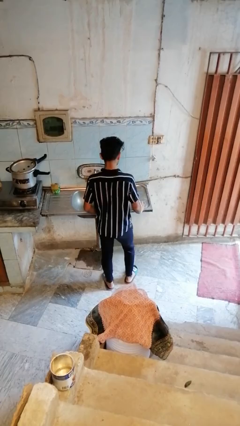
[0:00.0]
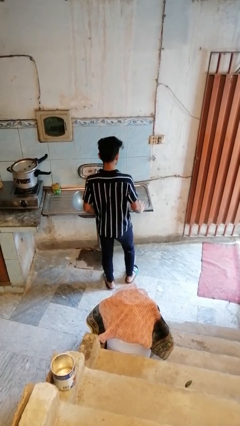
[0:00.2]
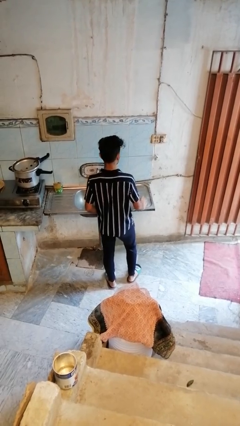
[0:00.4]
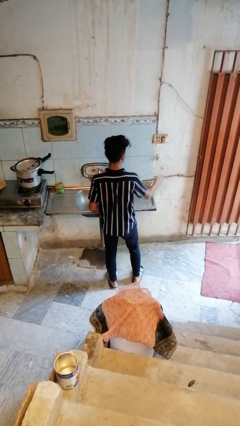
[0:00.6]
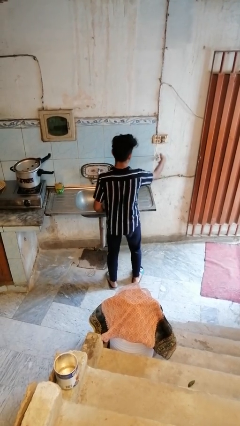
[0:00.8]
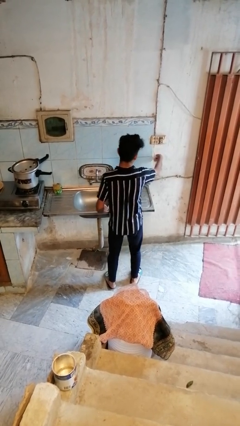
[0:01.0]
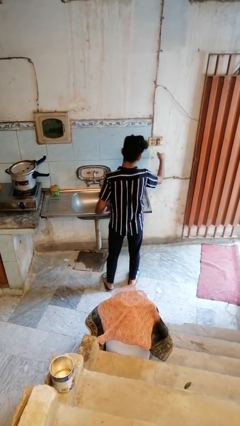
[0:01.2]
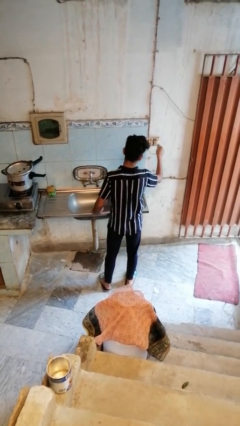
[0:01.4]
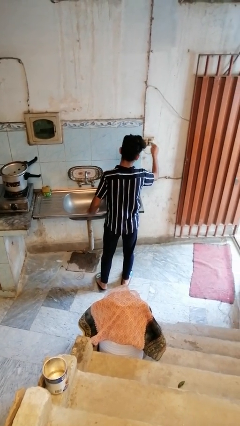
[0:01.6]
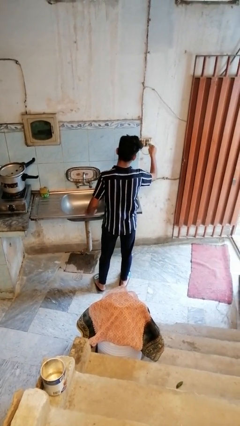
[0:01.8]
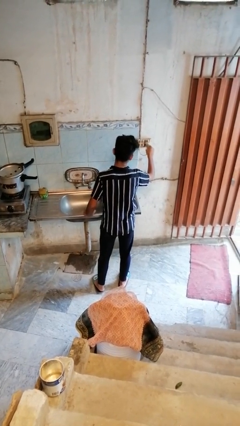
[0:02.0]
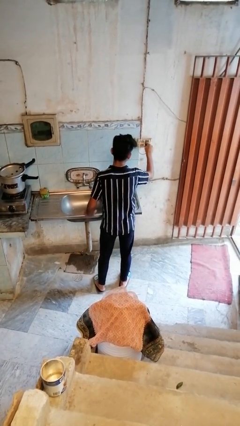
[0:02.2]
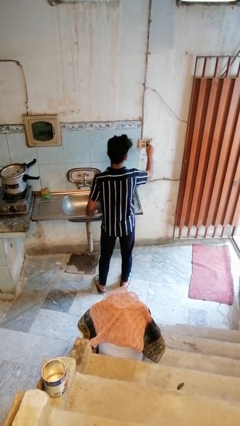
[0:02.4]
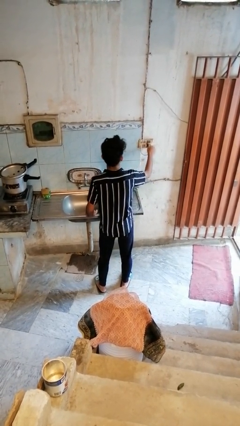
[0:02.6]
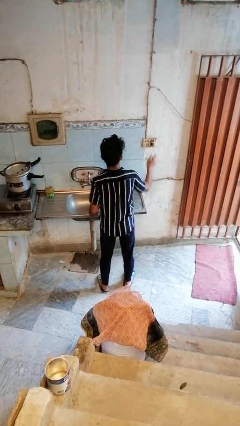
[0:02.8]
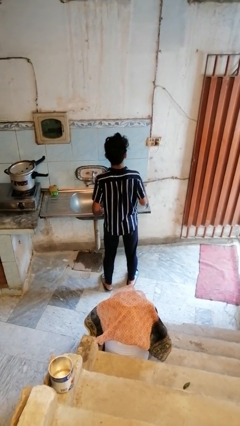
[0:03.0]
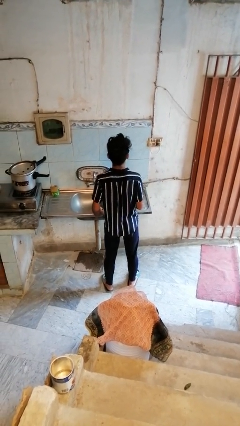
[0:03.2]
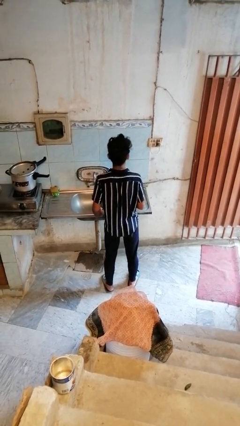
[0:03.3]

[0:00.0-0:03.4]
person plugs into electrical socket

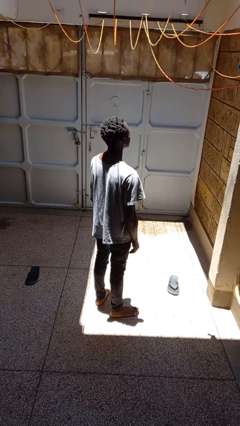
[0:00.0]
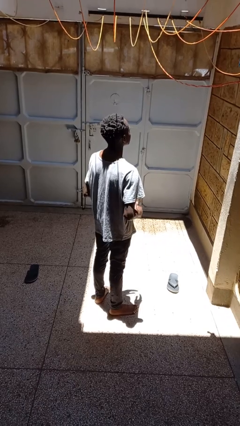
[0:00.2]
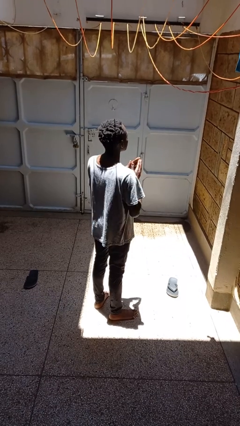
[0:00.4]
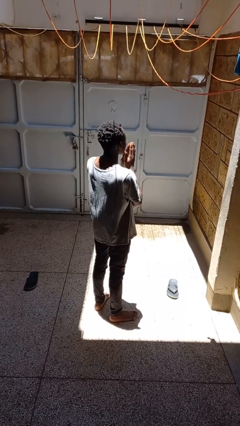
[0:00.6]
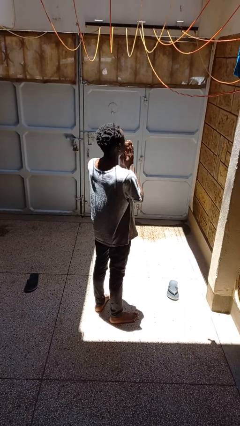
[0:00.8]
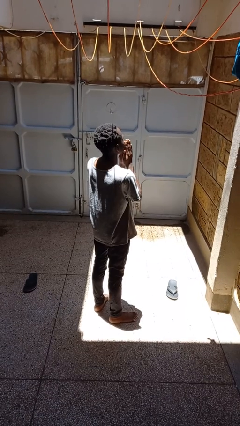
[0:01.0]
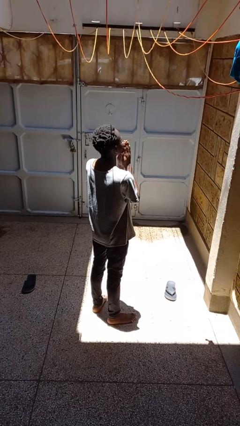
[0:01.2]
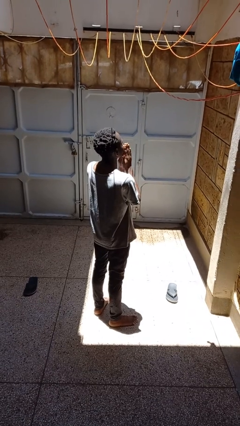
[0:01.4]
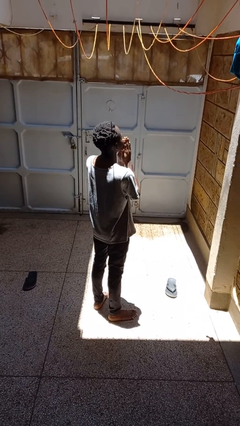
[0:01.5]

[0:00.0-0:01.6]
person prays

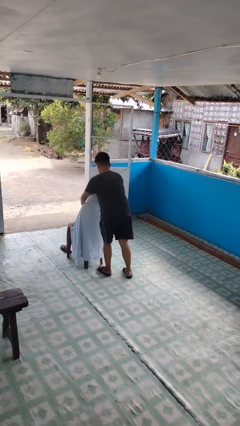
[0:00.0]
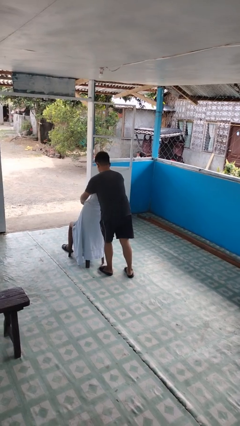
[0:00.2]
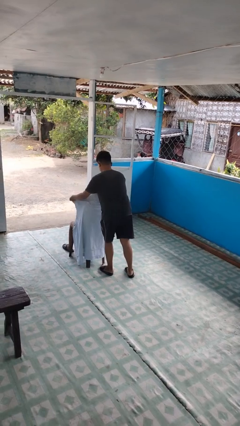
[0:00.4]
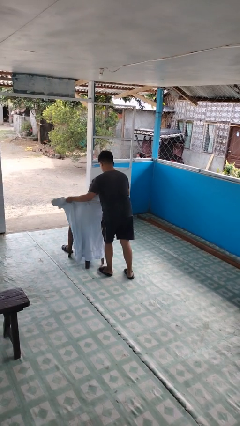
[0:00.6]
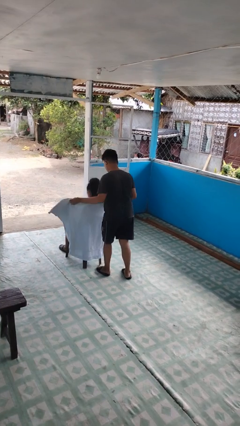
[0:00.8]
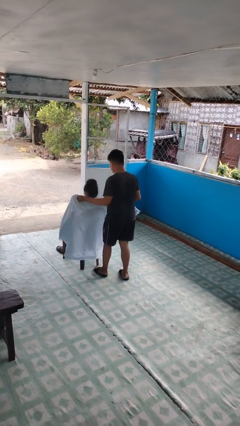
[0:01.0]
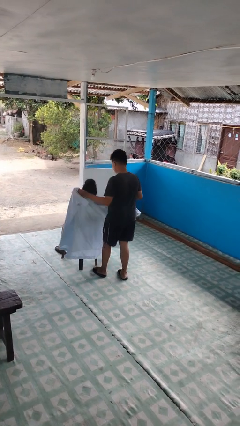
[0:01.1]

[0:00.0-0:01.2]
person uncovers friend with blanket

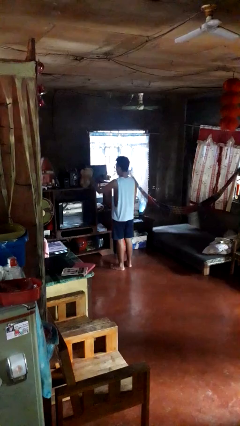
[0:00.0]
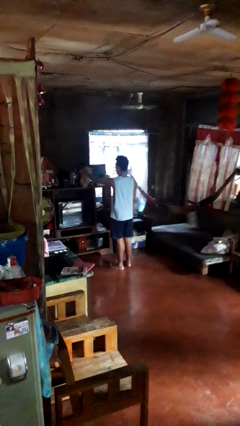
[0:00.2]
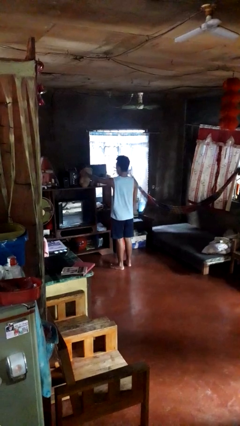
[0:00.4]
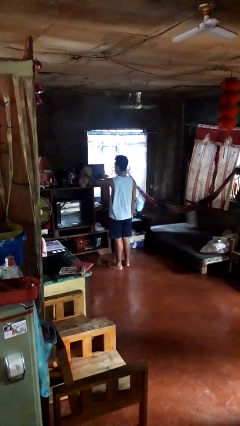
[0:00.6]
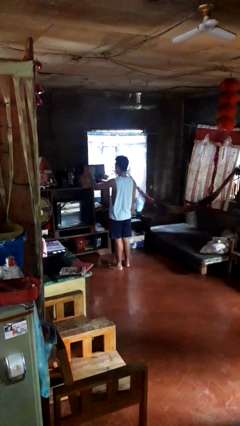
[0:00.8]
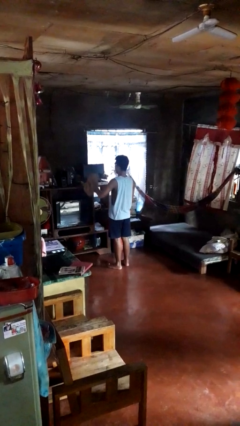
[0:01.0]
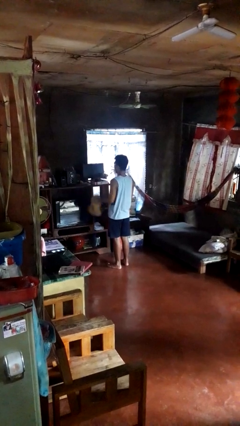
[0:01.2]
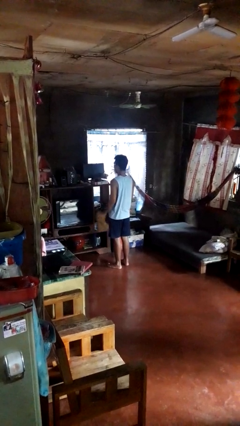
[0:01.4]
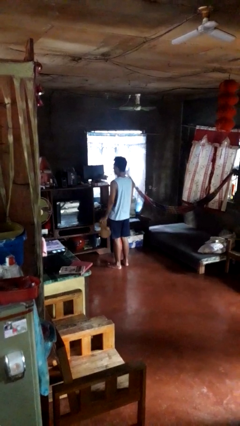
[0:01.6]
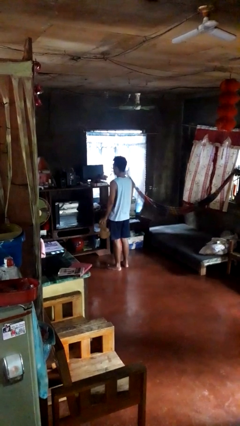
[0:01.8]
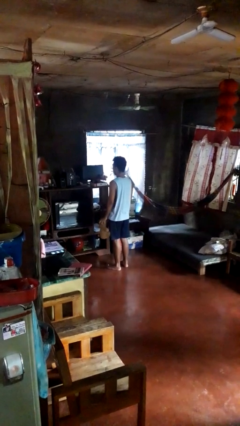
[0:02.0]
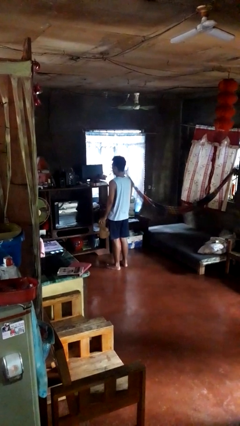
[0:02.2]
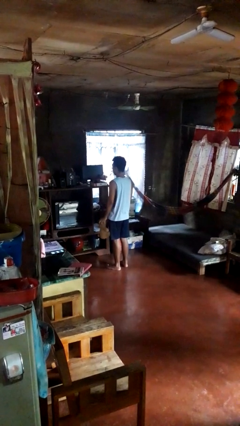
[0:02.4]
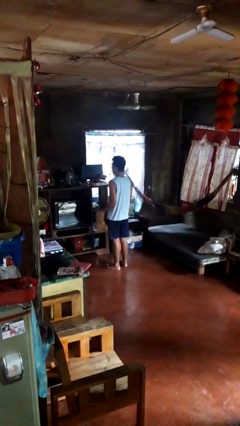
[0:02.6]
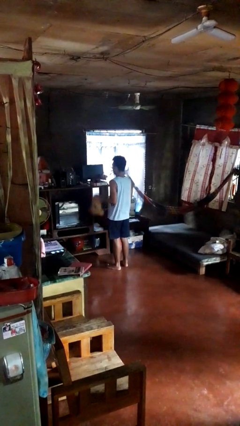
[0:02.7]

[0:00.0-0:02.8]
person picks up object from shelf

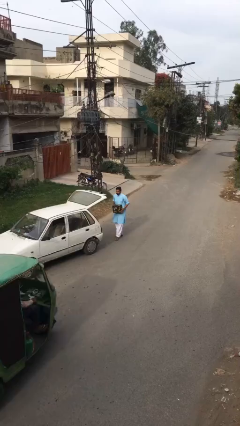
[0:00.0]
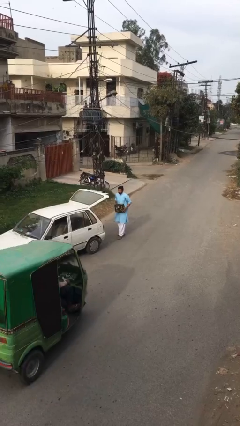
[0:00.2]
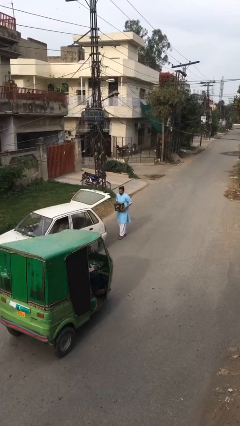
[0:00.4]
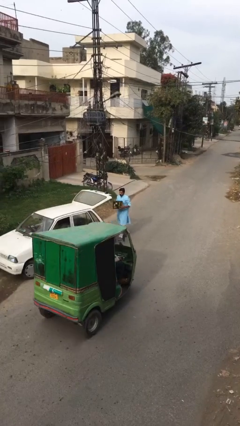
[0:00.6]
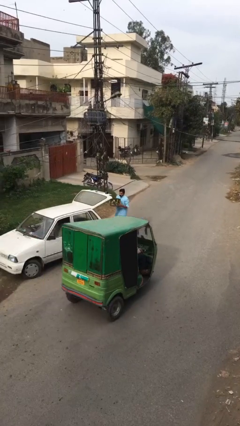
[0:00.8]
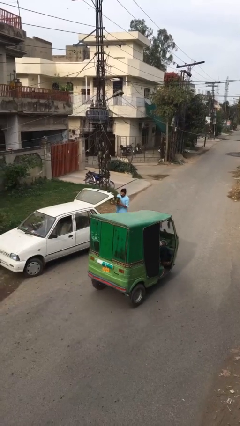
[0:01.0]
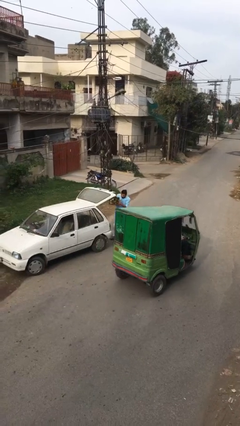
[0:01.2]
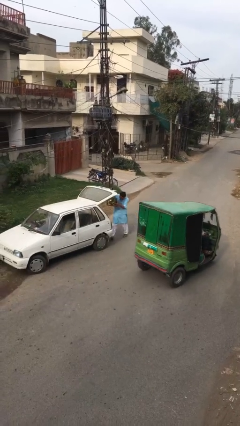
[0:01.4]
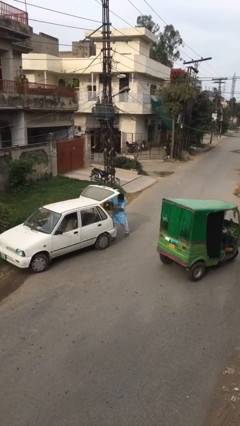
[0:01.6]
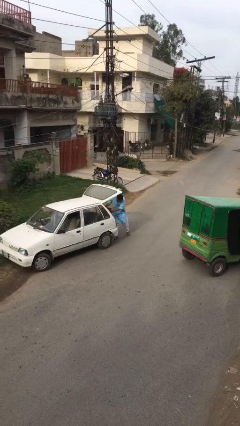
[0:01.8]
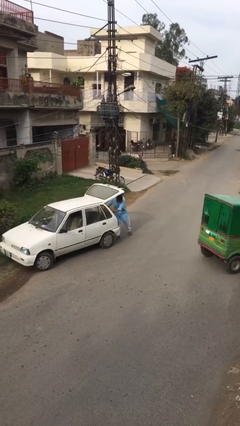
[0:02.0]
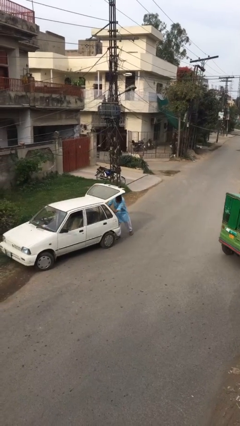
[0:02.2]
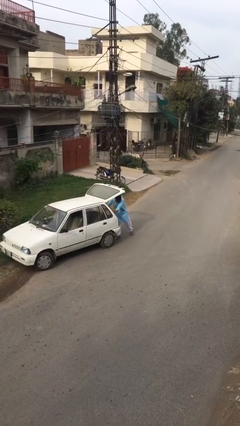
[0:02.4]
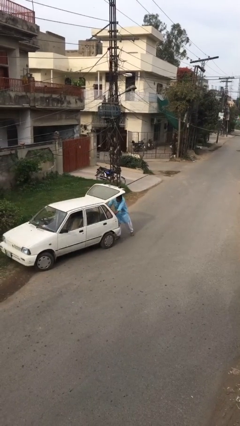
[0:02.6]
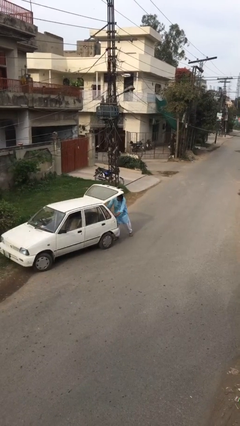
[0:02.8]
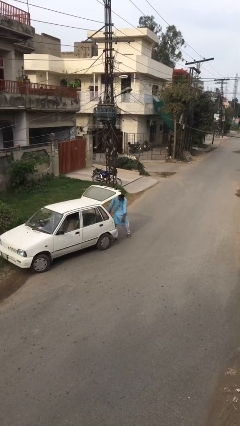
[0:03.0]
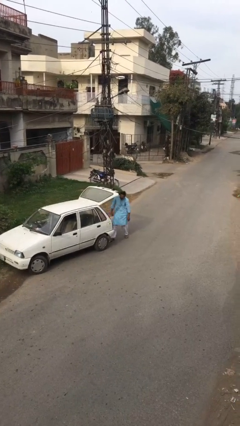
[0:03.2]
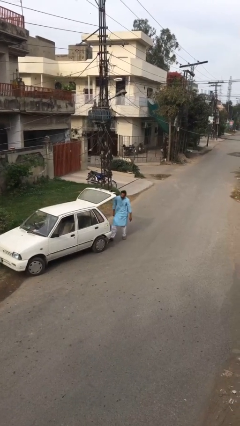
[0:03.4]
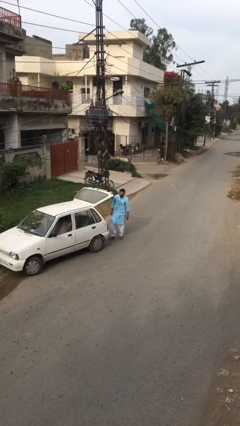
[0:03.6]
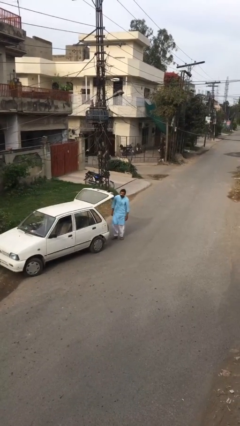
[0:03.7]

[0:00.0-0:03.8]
person loads car

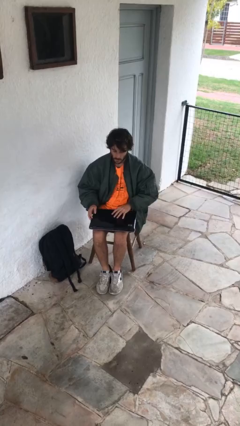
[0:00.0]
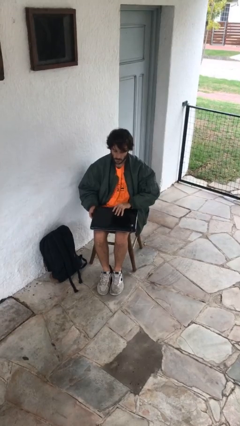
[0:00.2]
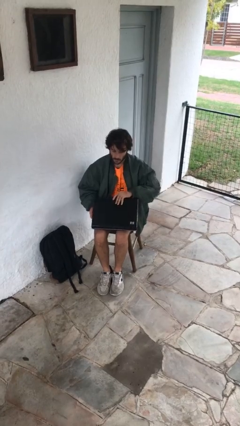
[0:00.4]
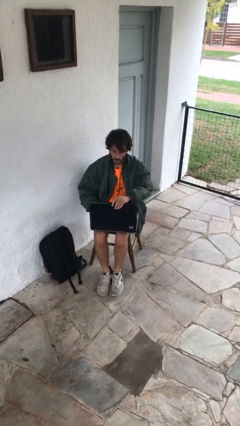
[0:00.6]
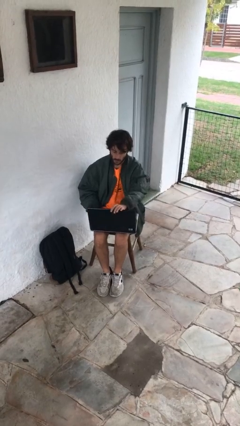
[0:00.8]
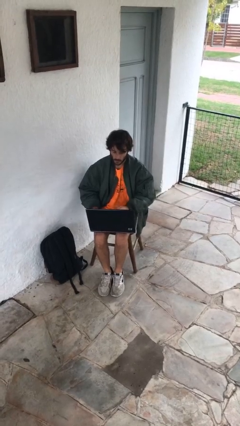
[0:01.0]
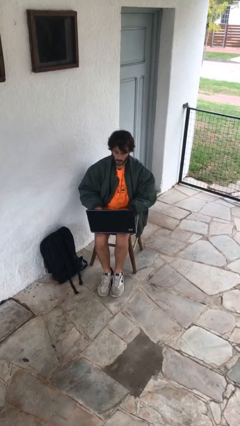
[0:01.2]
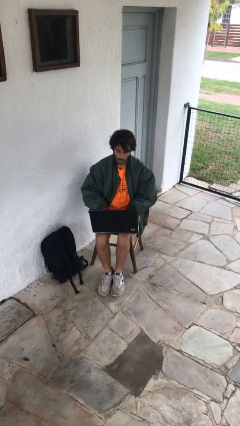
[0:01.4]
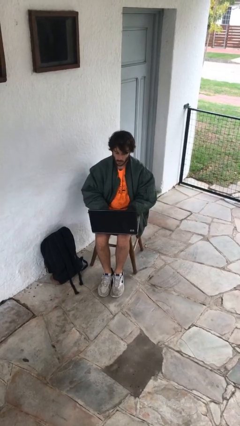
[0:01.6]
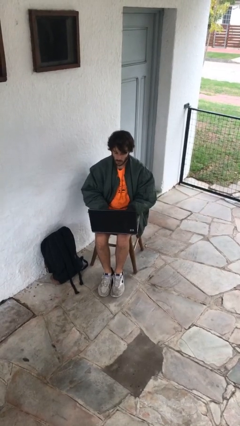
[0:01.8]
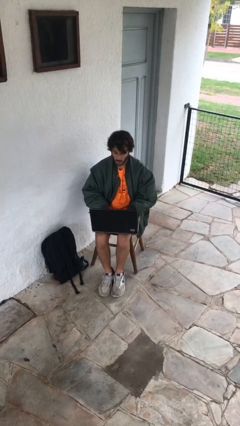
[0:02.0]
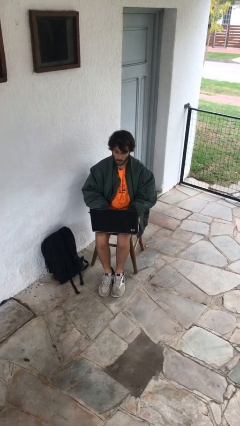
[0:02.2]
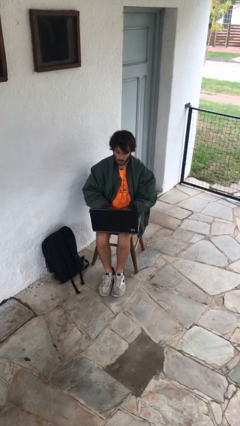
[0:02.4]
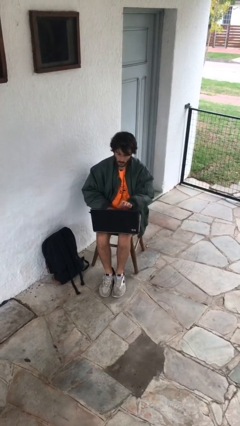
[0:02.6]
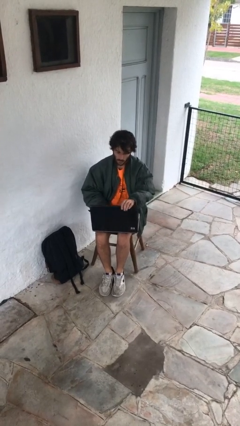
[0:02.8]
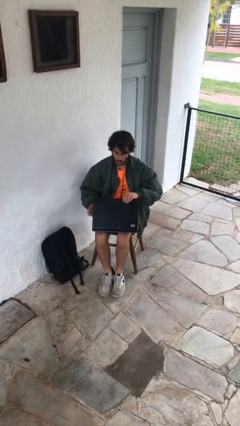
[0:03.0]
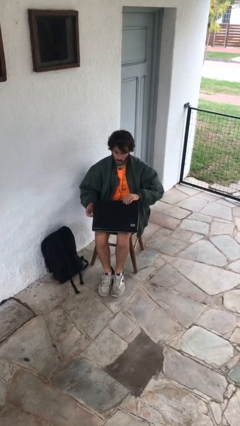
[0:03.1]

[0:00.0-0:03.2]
person interacts with laptop

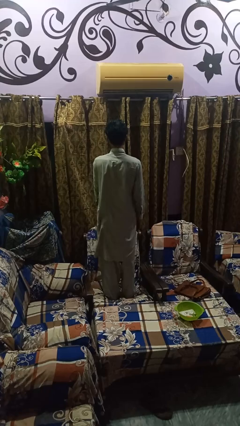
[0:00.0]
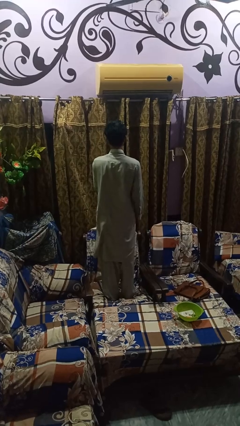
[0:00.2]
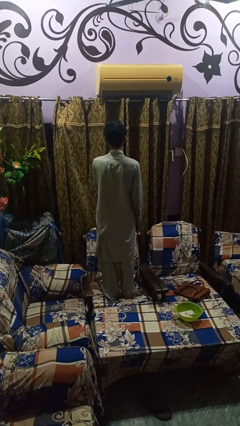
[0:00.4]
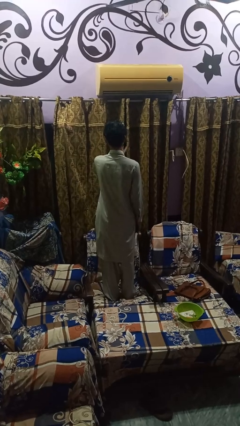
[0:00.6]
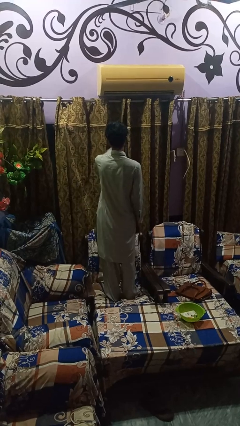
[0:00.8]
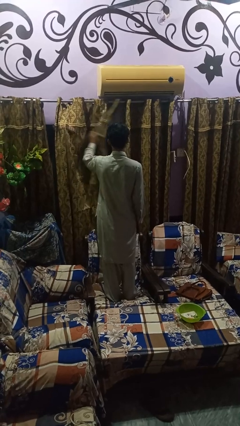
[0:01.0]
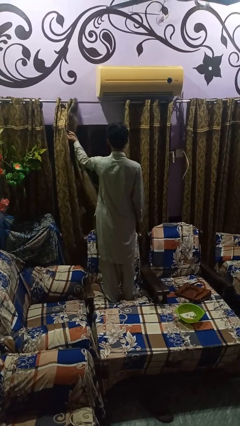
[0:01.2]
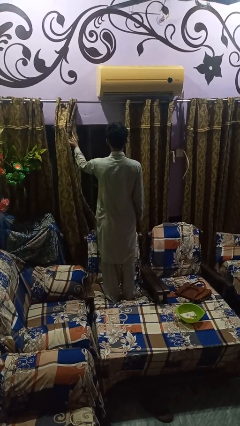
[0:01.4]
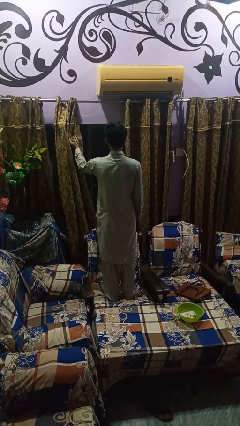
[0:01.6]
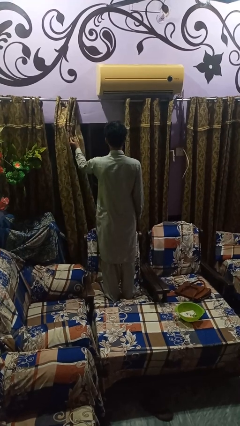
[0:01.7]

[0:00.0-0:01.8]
person opens curtains
